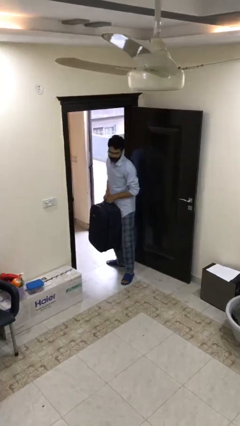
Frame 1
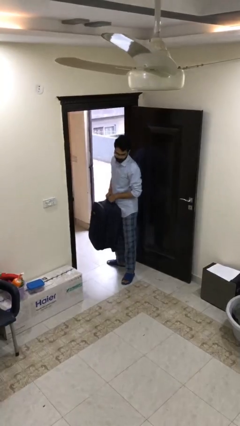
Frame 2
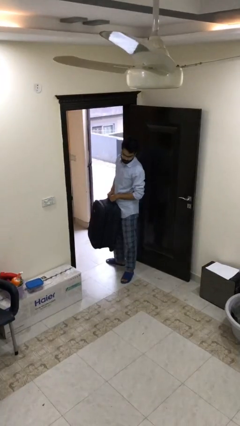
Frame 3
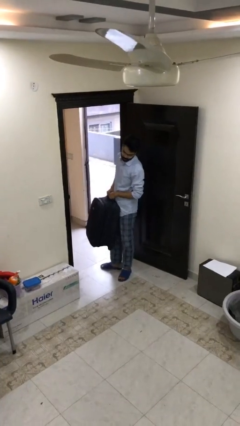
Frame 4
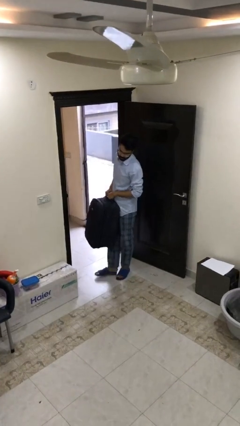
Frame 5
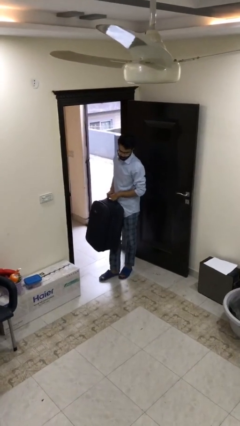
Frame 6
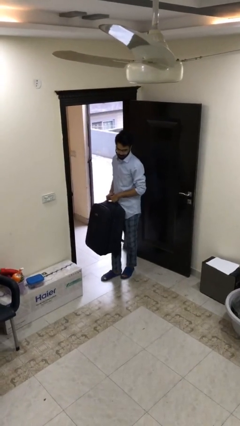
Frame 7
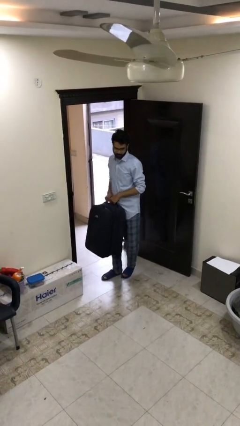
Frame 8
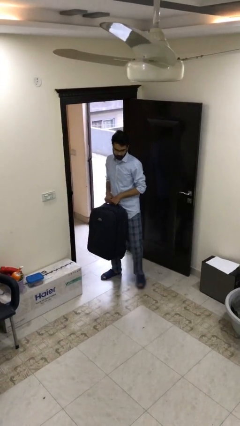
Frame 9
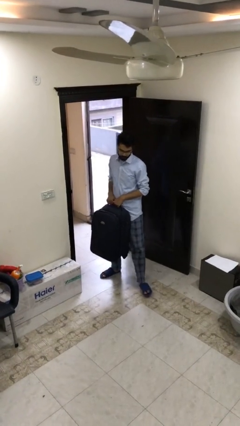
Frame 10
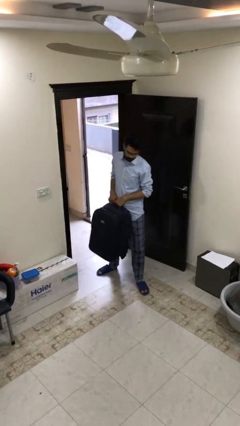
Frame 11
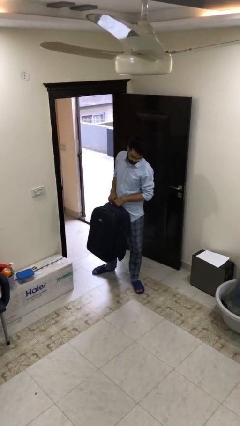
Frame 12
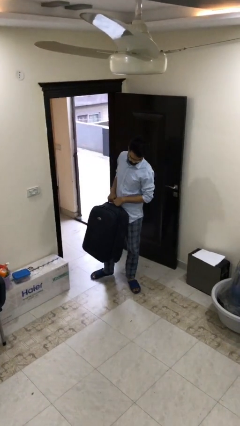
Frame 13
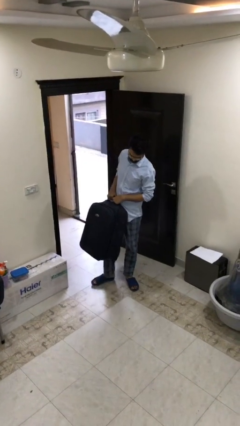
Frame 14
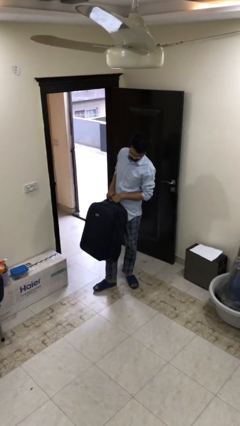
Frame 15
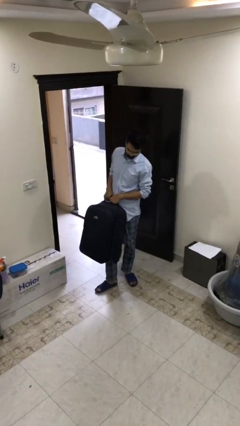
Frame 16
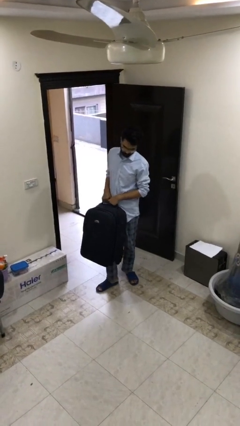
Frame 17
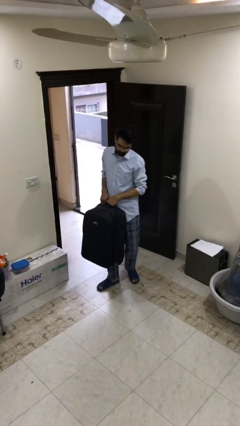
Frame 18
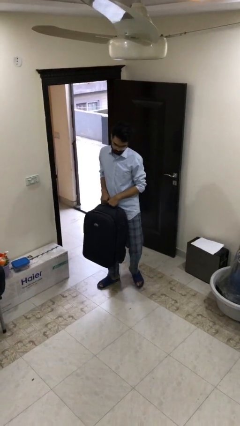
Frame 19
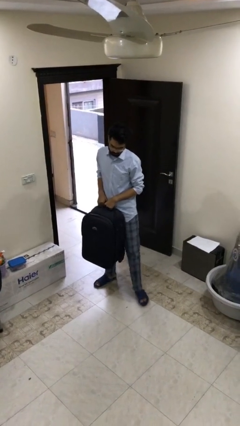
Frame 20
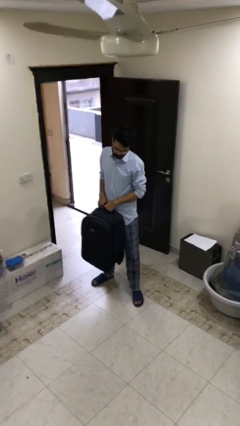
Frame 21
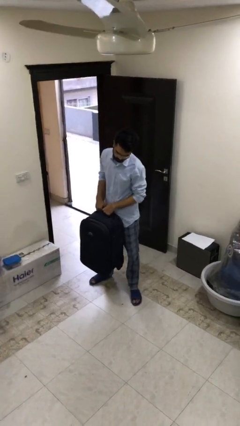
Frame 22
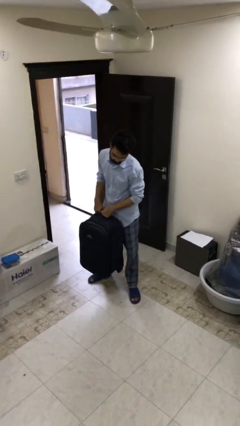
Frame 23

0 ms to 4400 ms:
person carries heavy object

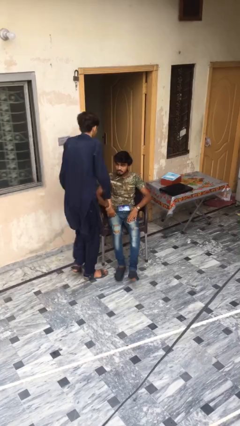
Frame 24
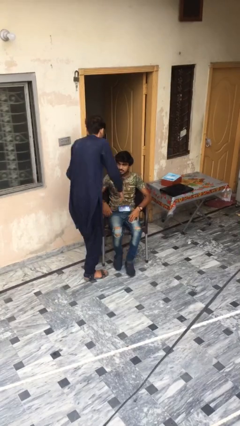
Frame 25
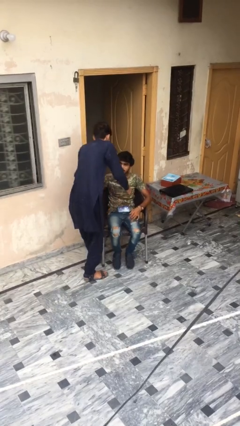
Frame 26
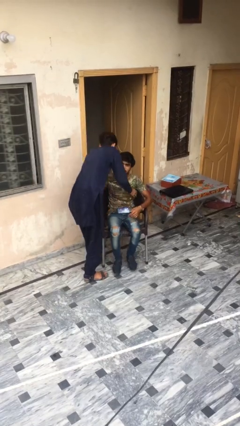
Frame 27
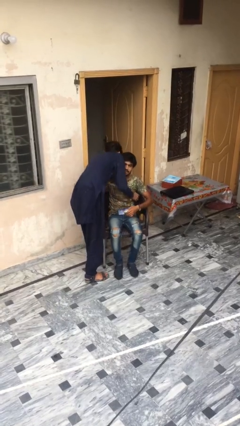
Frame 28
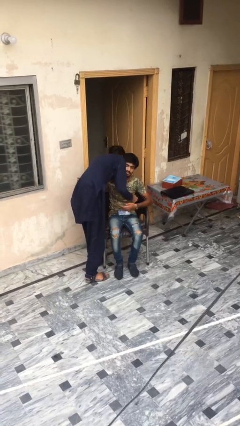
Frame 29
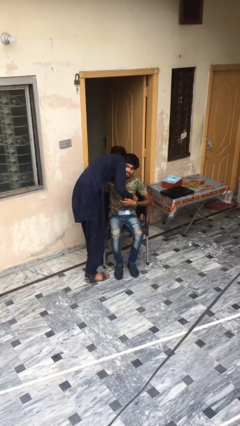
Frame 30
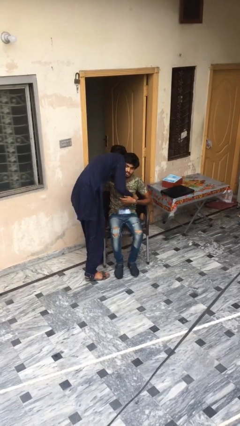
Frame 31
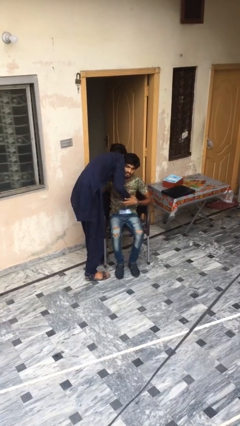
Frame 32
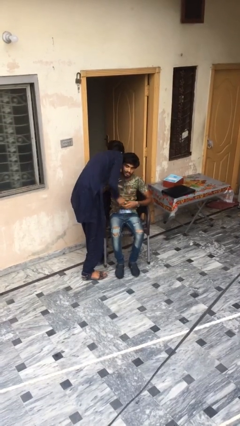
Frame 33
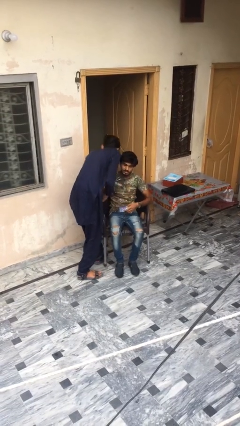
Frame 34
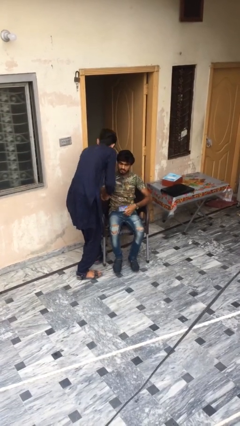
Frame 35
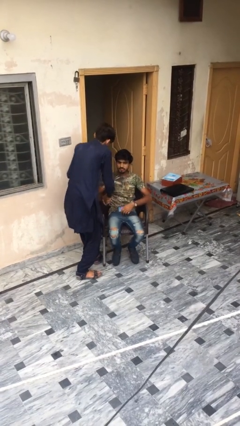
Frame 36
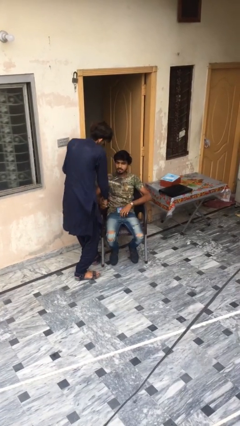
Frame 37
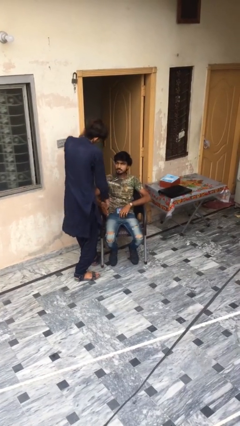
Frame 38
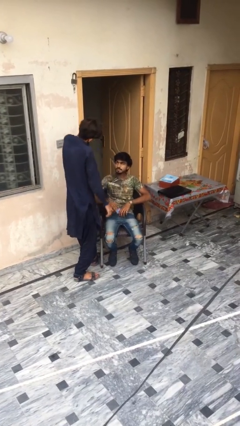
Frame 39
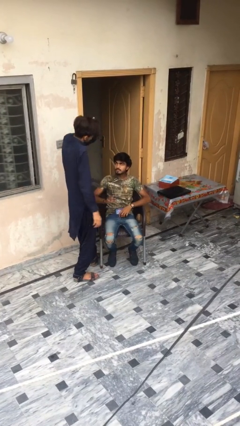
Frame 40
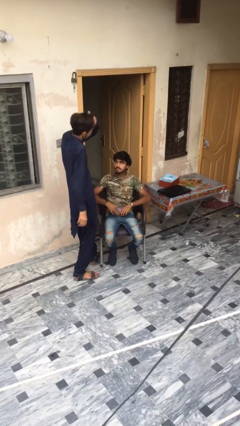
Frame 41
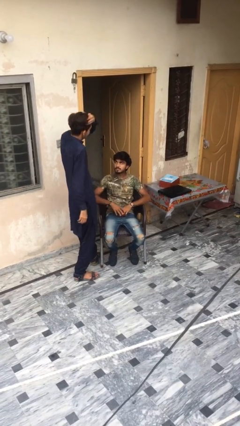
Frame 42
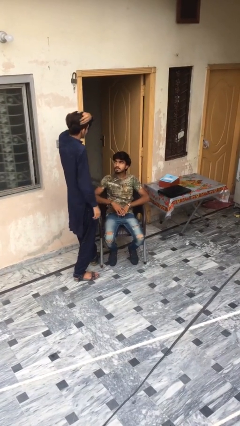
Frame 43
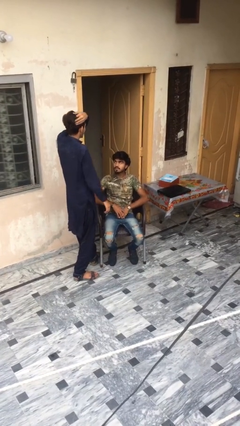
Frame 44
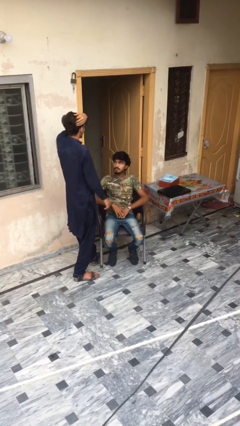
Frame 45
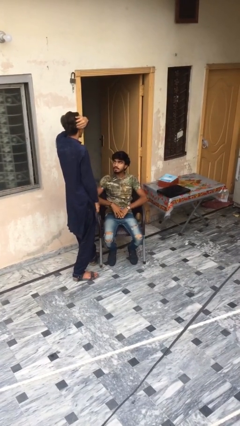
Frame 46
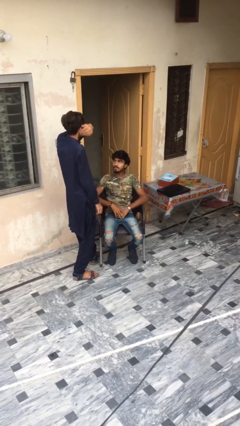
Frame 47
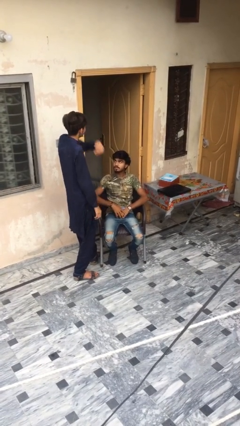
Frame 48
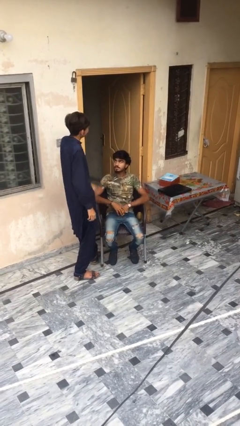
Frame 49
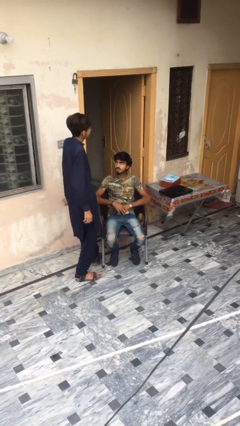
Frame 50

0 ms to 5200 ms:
person embraces person

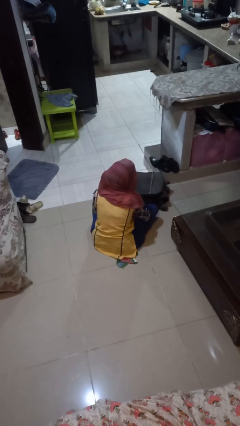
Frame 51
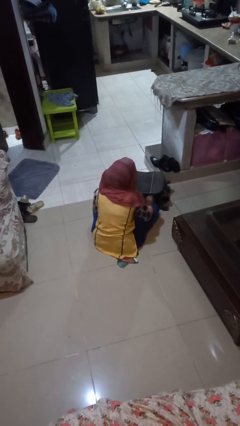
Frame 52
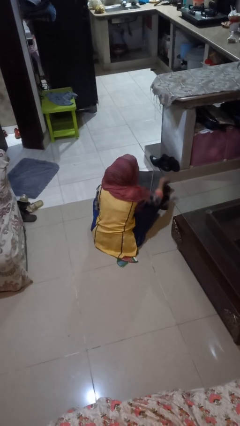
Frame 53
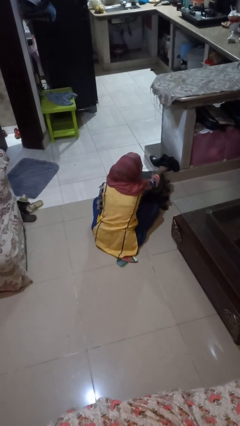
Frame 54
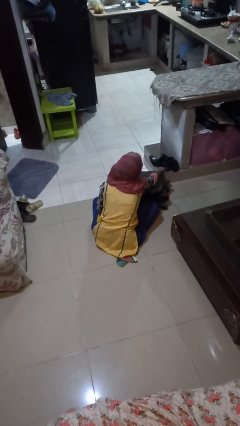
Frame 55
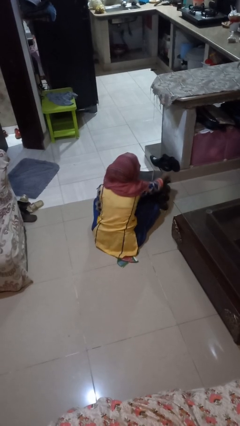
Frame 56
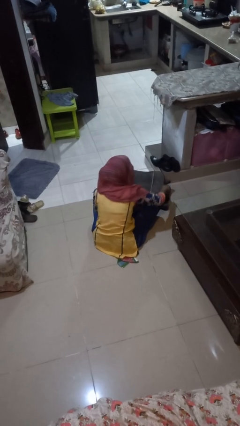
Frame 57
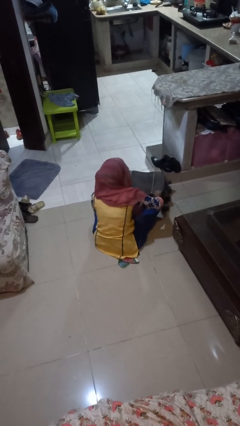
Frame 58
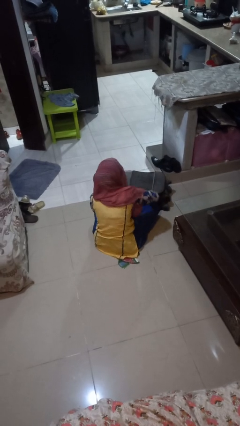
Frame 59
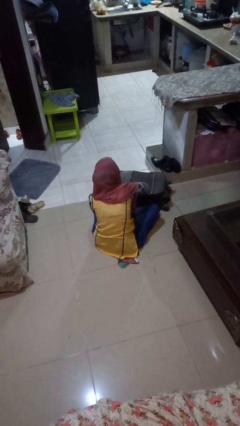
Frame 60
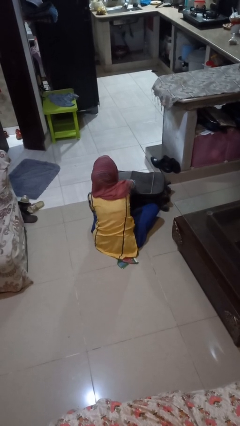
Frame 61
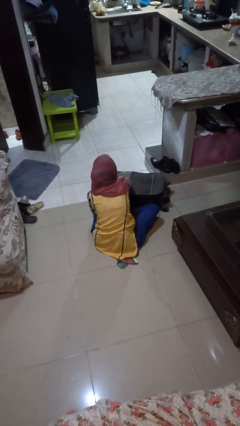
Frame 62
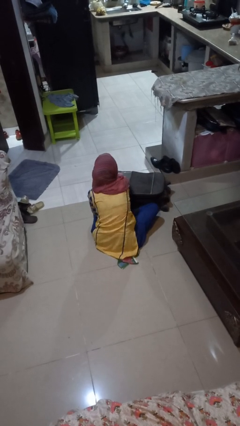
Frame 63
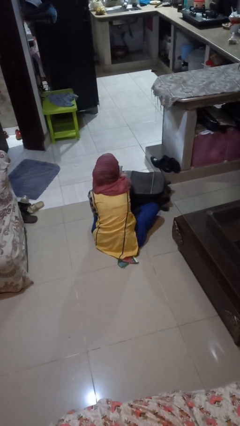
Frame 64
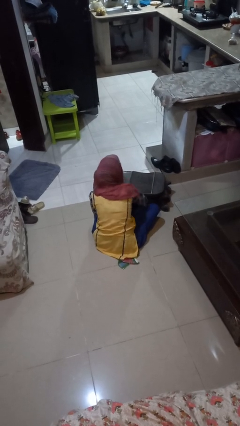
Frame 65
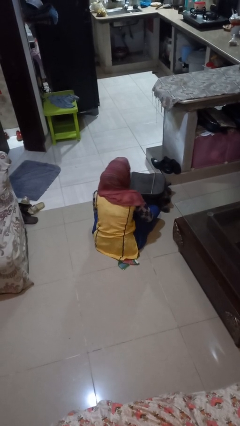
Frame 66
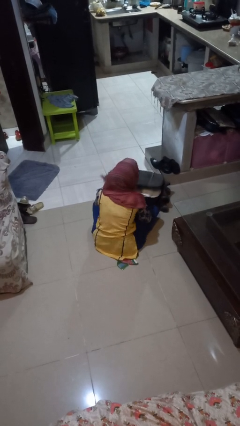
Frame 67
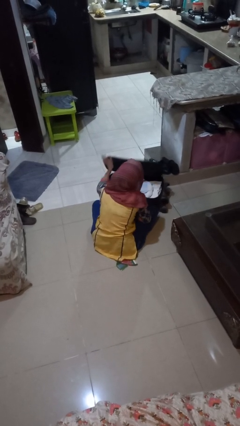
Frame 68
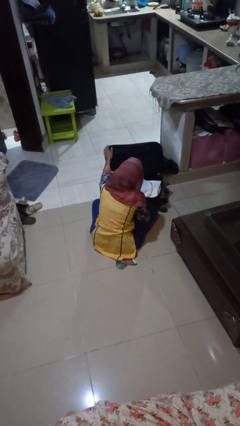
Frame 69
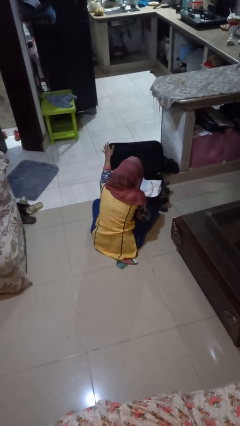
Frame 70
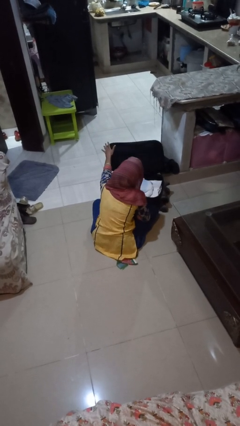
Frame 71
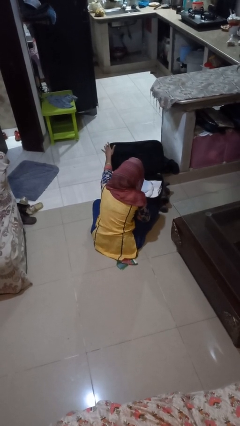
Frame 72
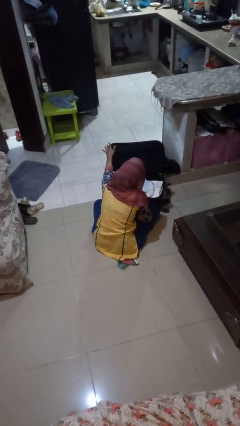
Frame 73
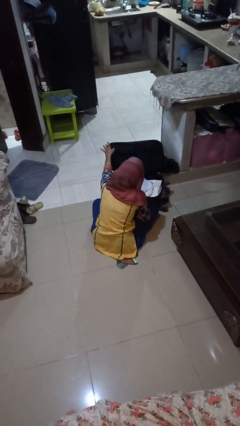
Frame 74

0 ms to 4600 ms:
person opens suitcase

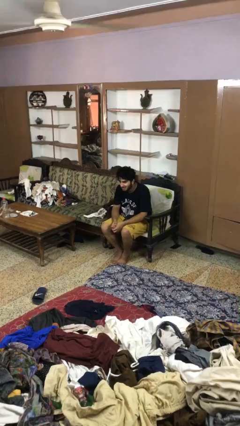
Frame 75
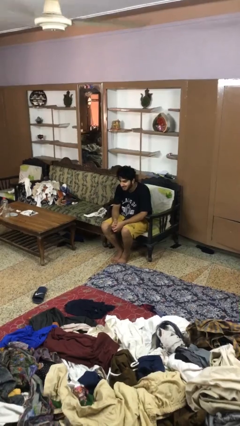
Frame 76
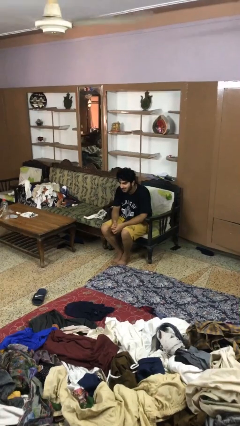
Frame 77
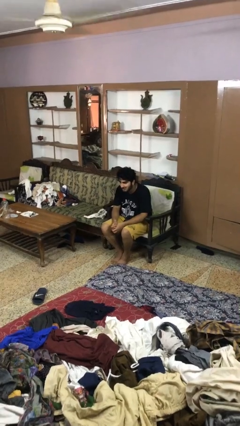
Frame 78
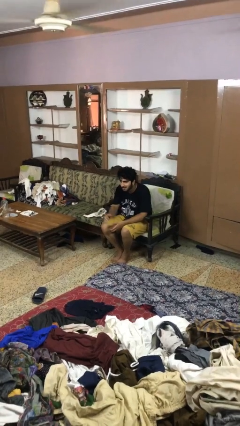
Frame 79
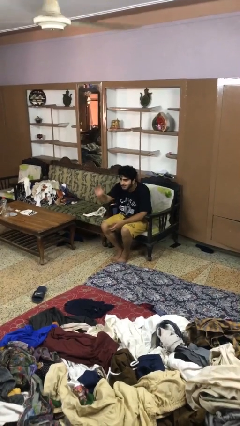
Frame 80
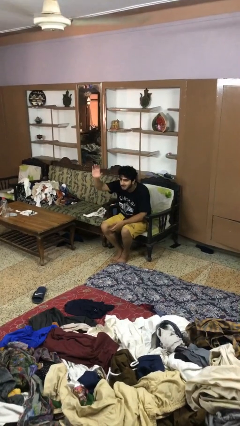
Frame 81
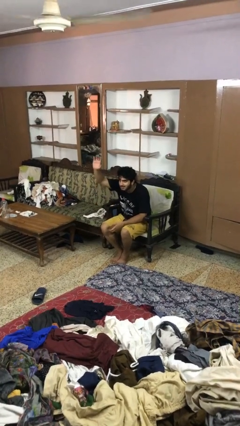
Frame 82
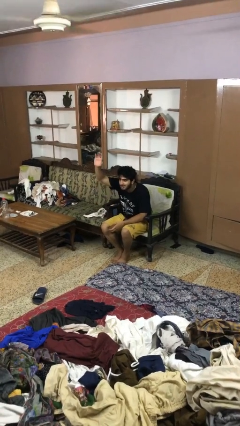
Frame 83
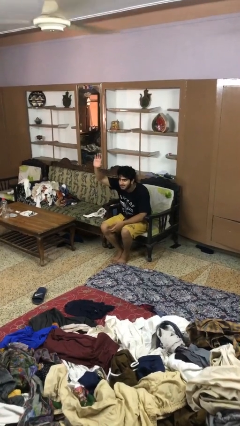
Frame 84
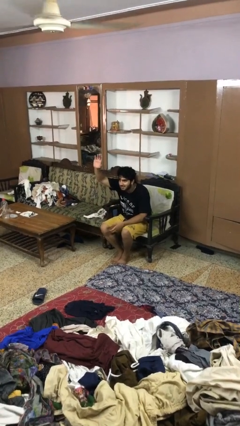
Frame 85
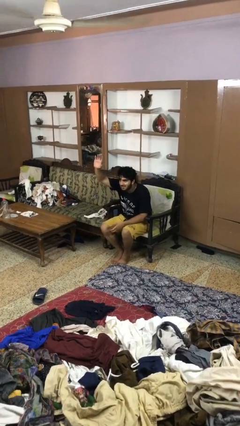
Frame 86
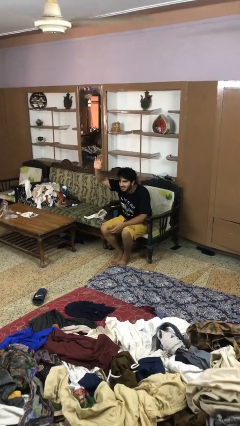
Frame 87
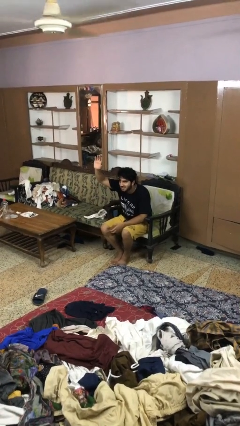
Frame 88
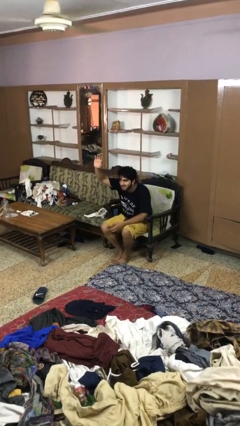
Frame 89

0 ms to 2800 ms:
person gestures raise hand

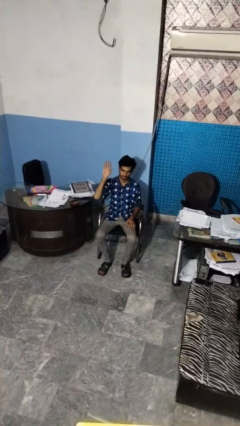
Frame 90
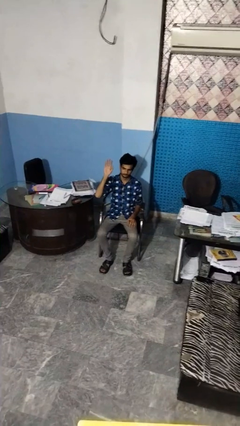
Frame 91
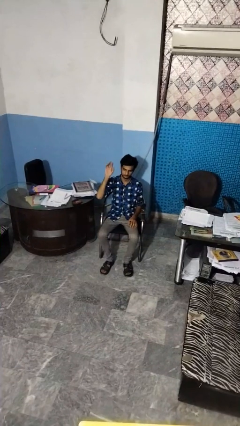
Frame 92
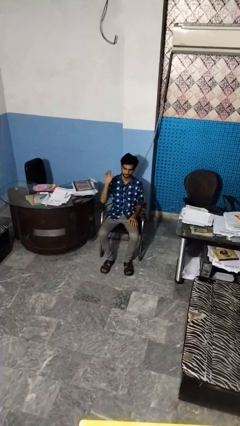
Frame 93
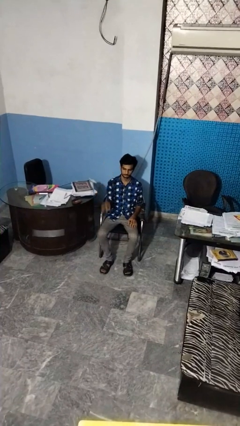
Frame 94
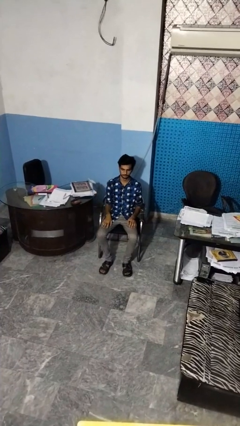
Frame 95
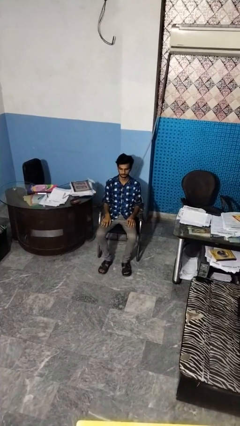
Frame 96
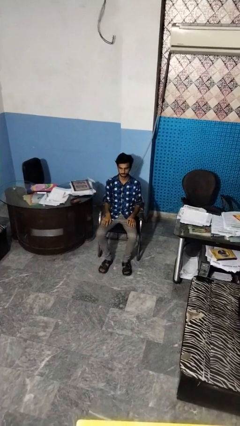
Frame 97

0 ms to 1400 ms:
person gestures lower hand
